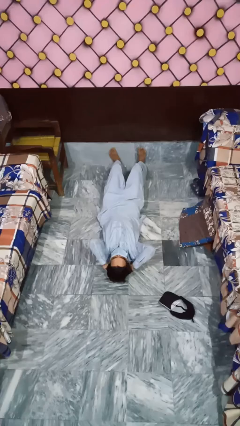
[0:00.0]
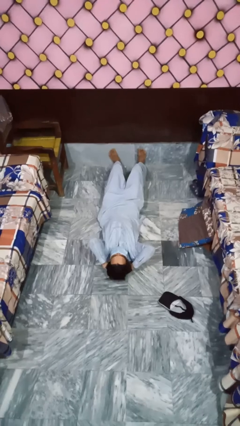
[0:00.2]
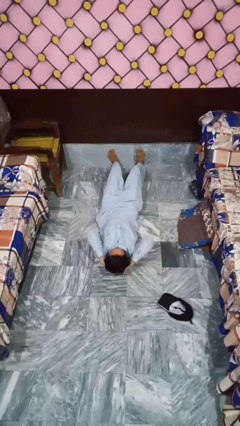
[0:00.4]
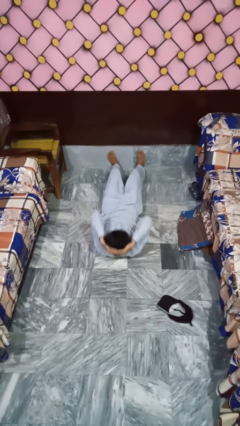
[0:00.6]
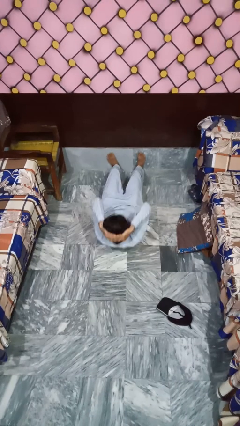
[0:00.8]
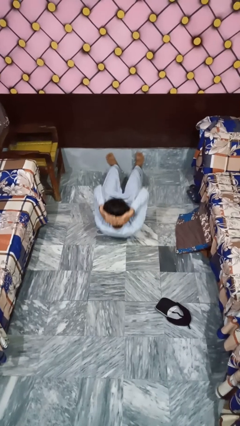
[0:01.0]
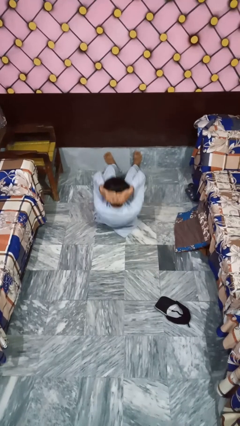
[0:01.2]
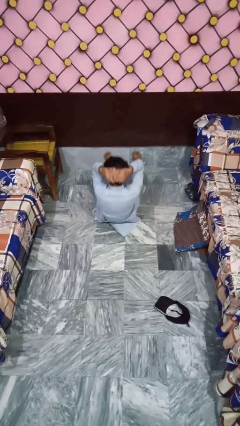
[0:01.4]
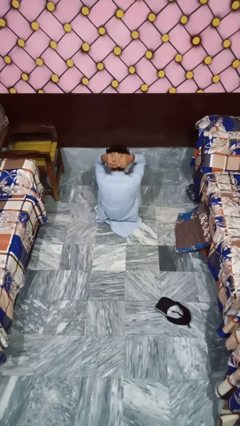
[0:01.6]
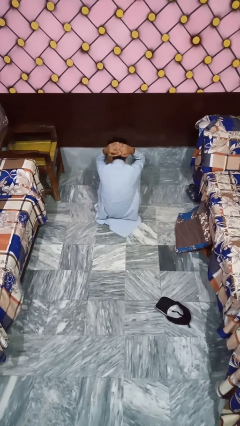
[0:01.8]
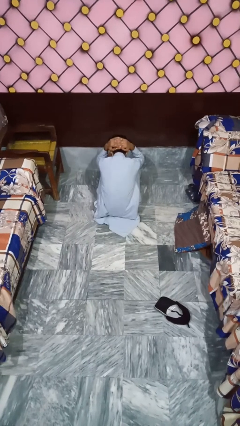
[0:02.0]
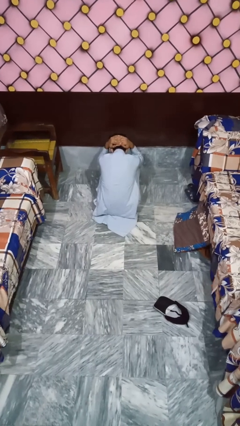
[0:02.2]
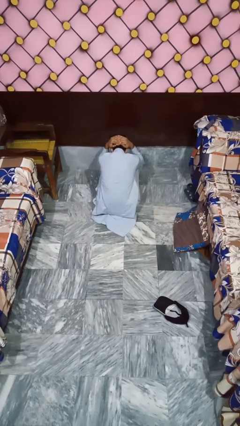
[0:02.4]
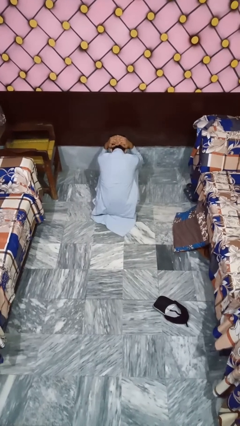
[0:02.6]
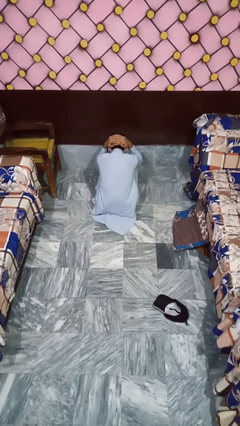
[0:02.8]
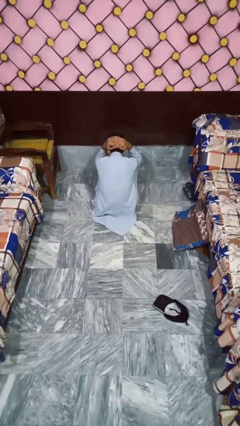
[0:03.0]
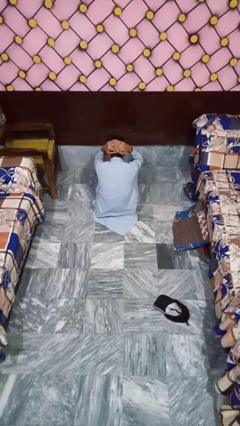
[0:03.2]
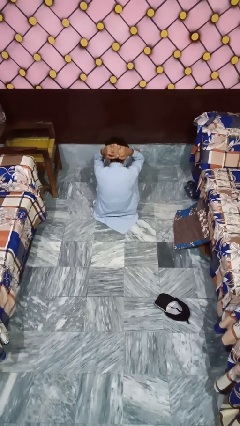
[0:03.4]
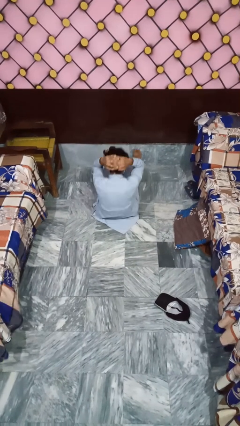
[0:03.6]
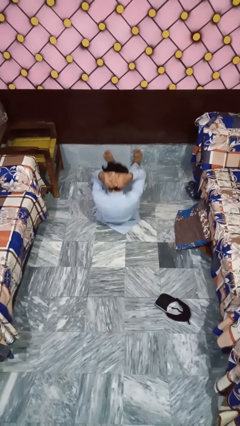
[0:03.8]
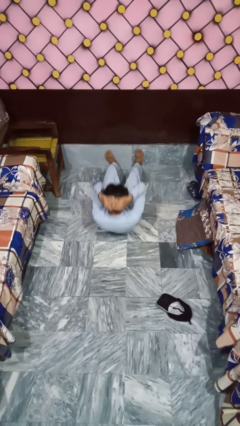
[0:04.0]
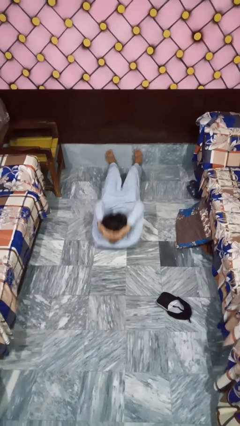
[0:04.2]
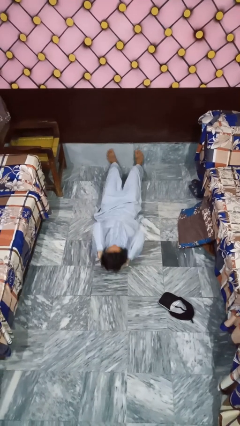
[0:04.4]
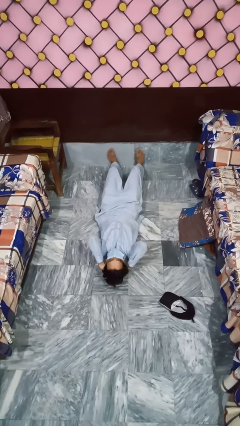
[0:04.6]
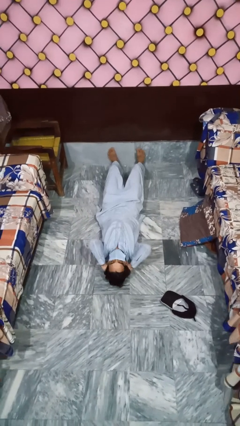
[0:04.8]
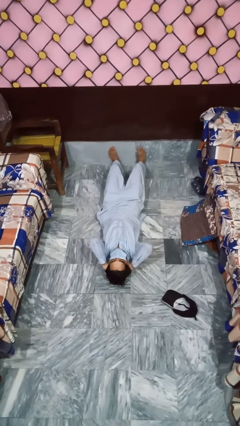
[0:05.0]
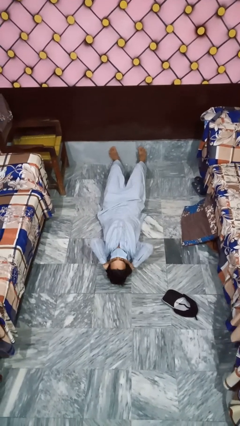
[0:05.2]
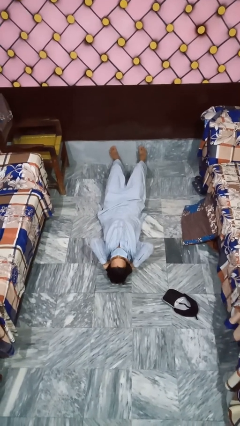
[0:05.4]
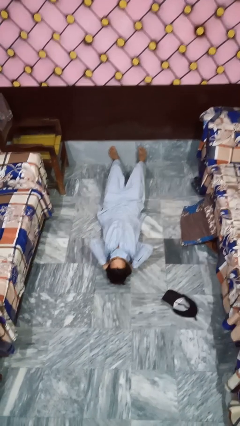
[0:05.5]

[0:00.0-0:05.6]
person exercises with situp

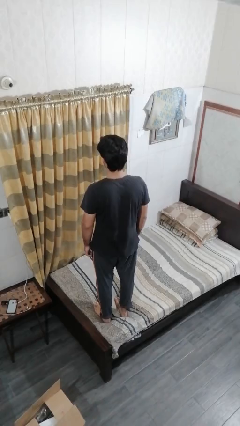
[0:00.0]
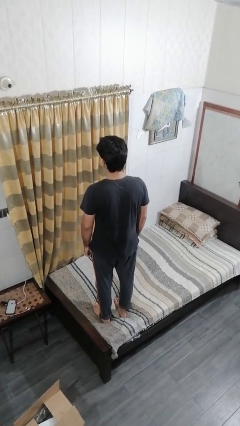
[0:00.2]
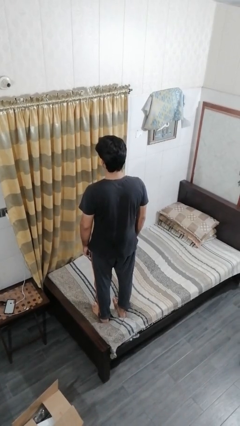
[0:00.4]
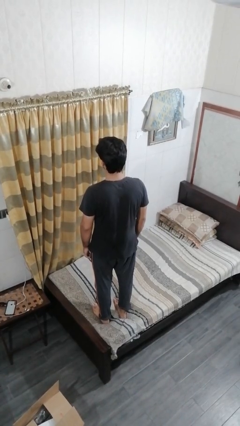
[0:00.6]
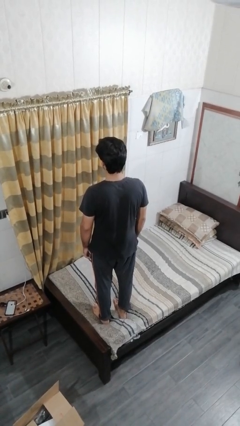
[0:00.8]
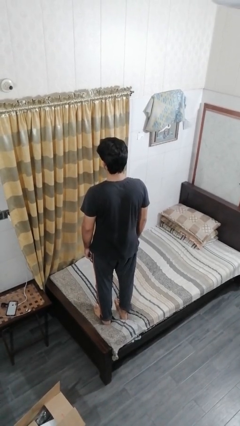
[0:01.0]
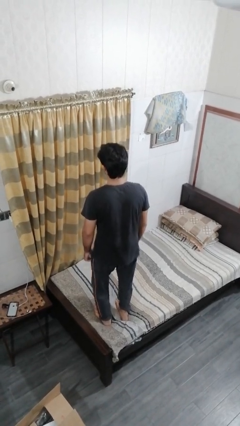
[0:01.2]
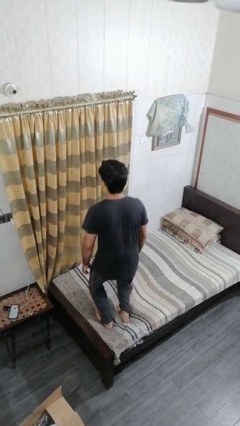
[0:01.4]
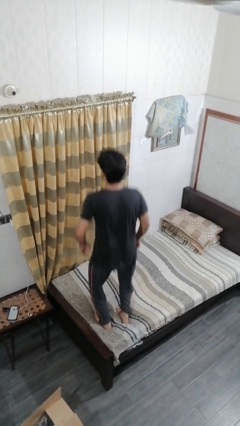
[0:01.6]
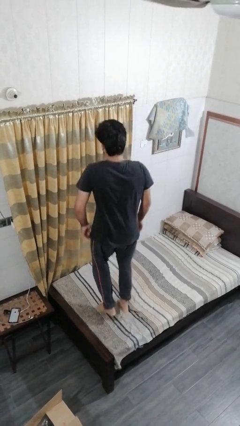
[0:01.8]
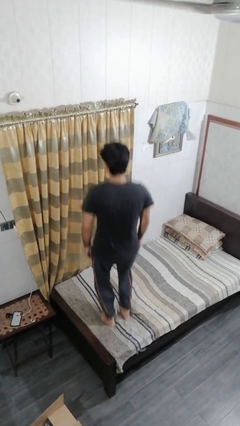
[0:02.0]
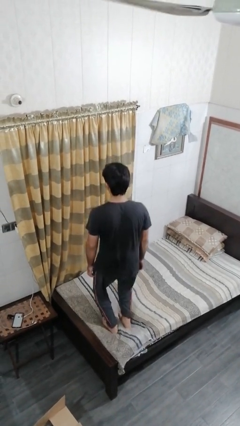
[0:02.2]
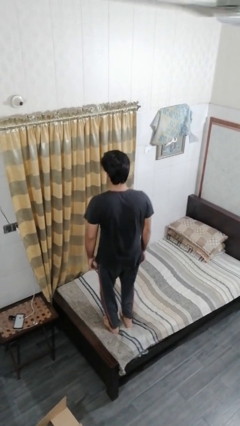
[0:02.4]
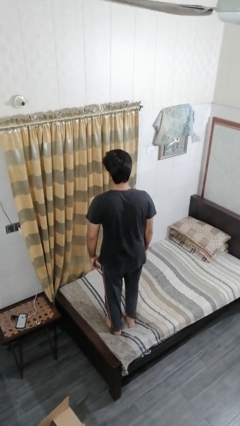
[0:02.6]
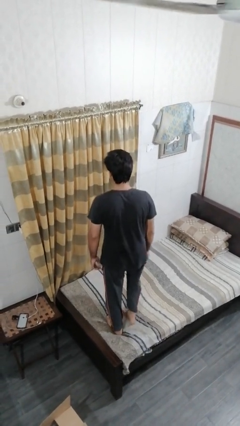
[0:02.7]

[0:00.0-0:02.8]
person jumps on bed

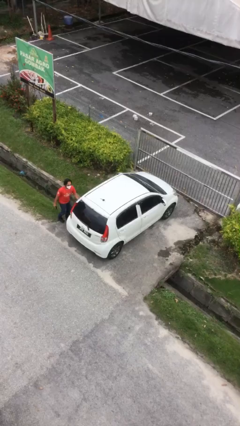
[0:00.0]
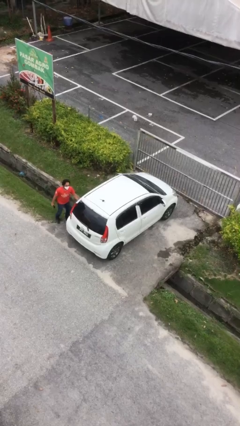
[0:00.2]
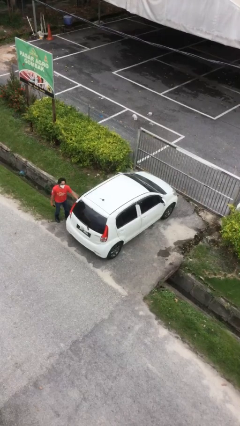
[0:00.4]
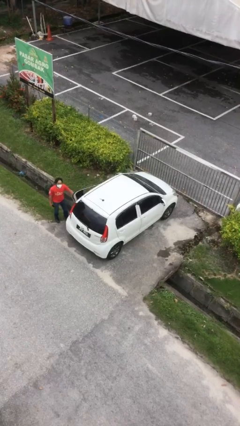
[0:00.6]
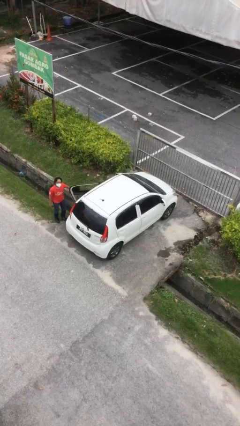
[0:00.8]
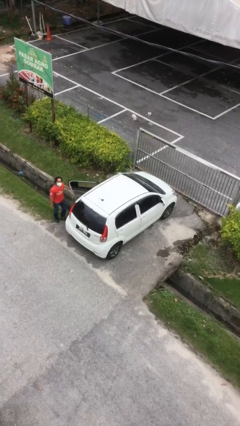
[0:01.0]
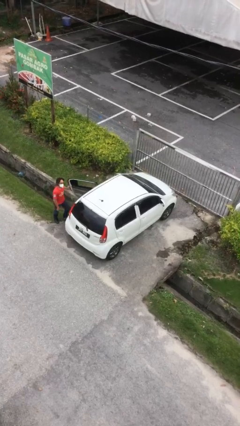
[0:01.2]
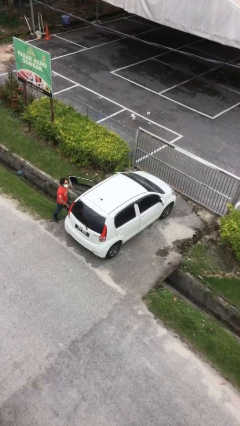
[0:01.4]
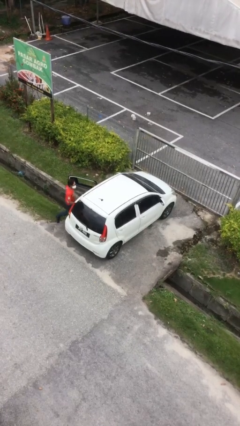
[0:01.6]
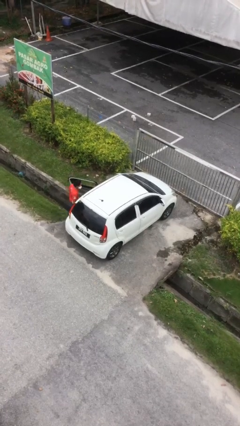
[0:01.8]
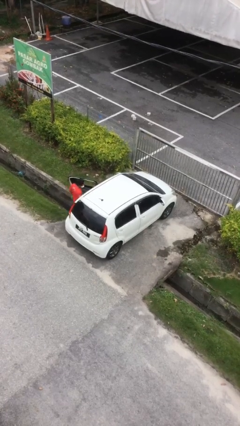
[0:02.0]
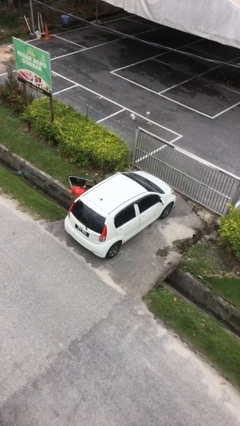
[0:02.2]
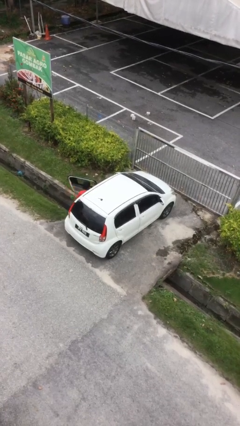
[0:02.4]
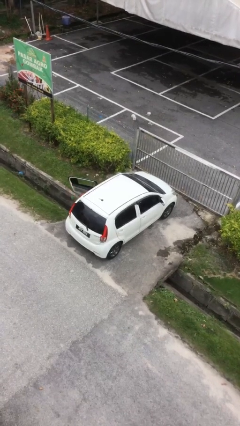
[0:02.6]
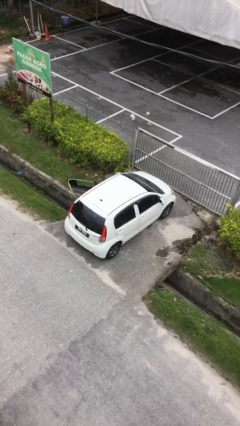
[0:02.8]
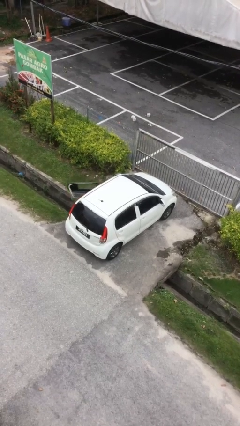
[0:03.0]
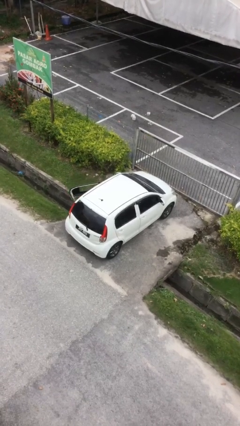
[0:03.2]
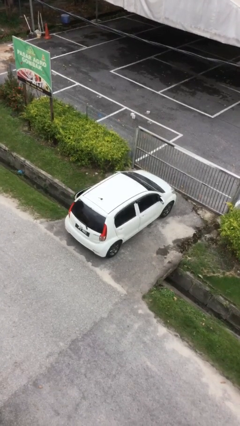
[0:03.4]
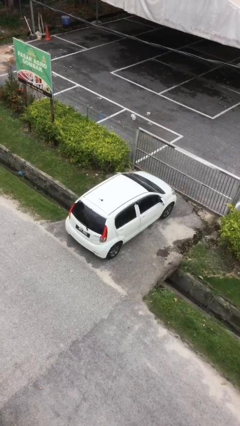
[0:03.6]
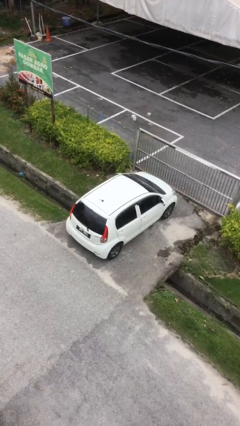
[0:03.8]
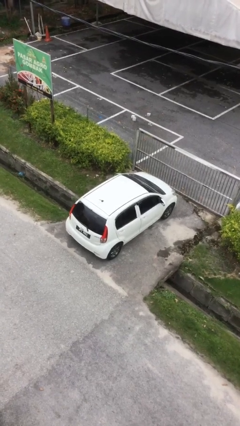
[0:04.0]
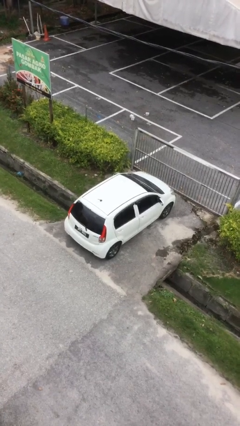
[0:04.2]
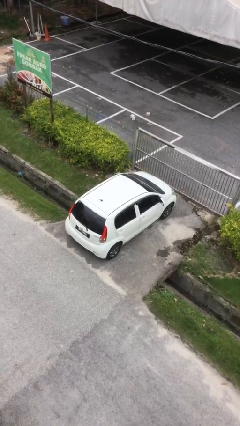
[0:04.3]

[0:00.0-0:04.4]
car picks up person

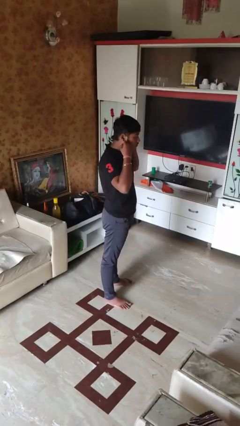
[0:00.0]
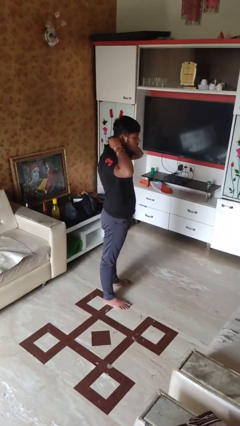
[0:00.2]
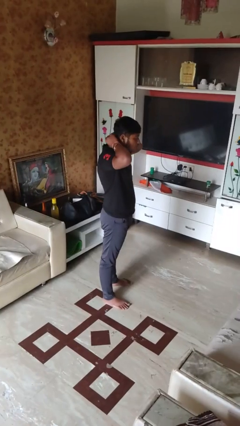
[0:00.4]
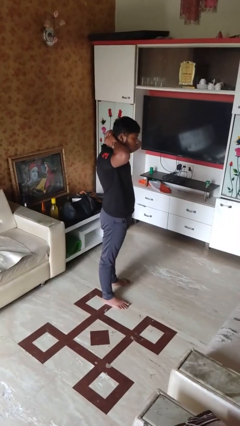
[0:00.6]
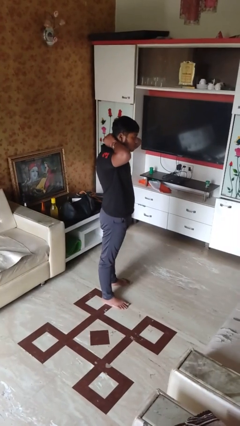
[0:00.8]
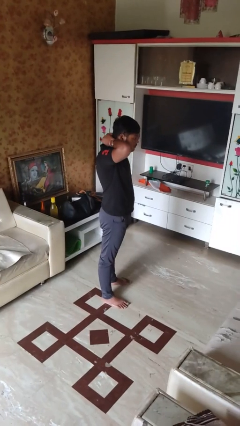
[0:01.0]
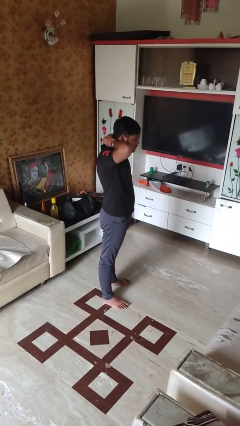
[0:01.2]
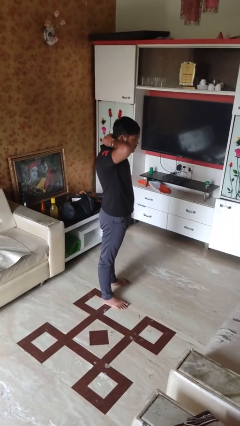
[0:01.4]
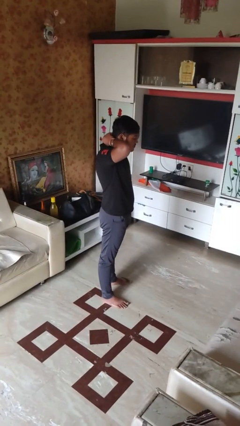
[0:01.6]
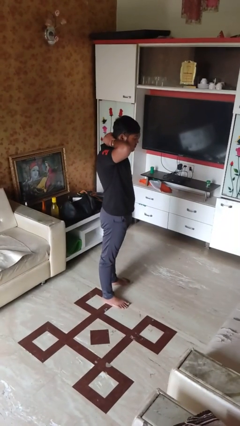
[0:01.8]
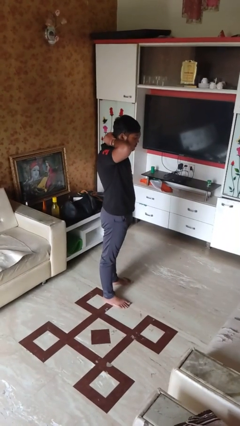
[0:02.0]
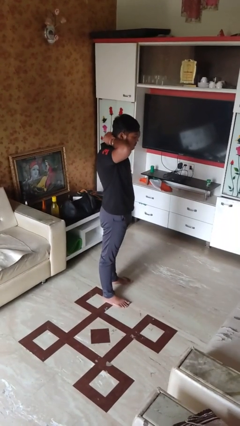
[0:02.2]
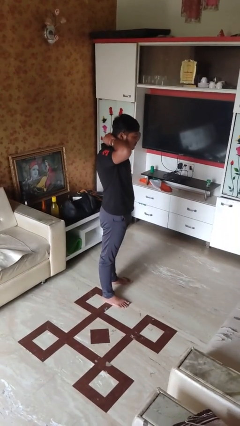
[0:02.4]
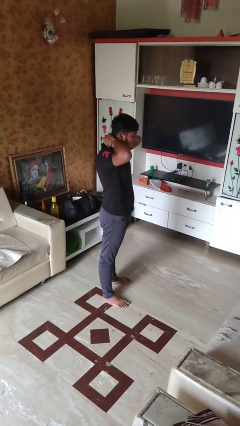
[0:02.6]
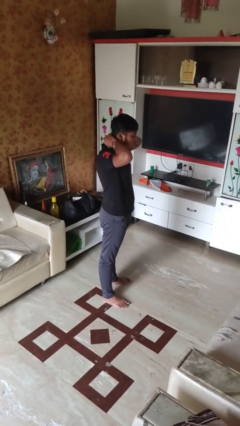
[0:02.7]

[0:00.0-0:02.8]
person puts on necklace

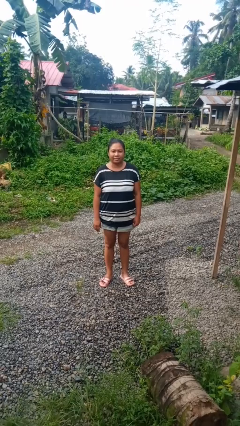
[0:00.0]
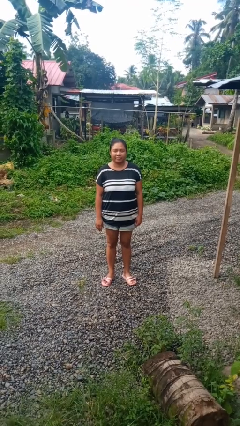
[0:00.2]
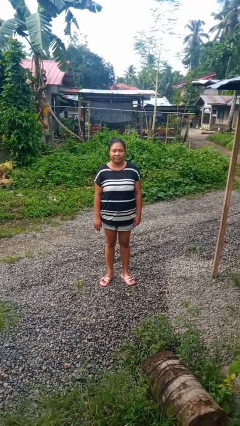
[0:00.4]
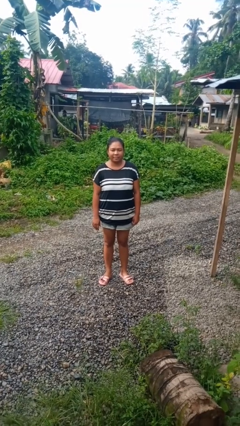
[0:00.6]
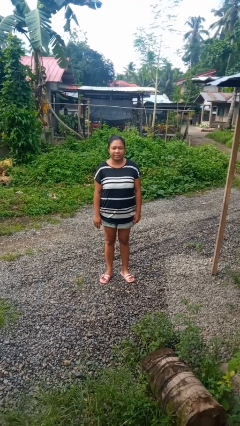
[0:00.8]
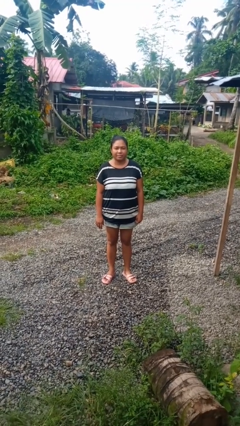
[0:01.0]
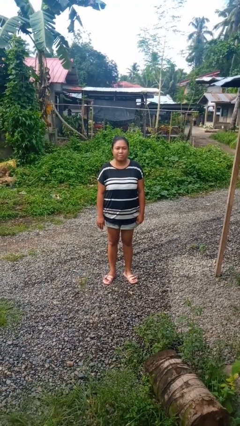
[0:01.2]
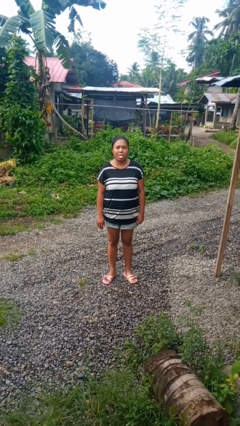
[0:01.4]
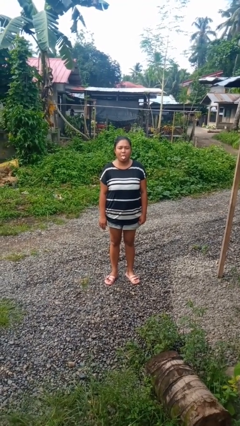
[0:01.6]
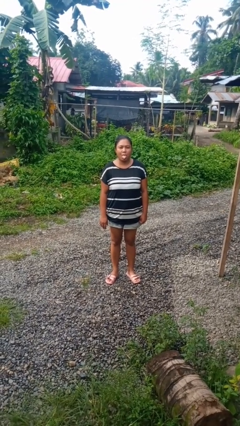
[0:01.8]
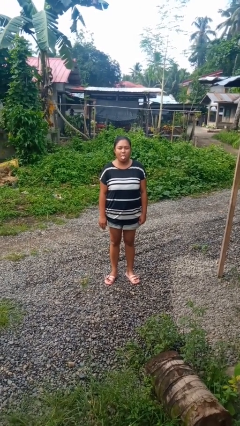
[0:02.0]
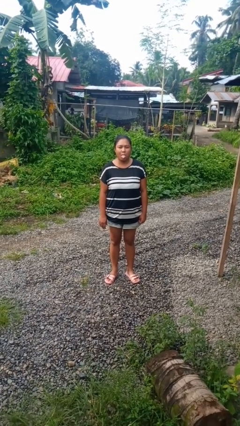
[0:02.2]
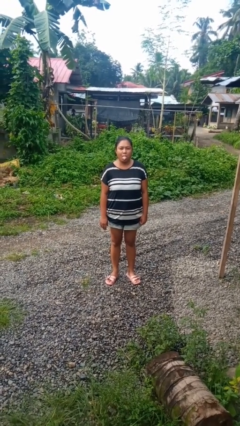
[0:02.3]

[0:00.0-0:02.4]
person sticks out tongue
